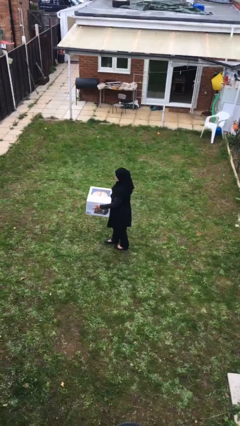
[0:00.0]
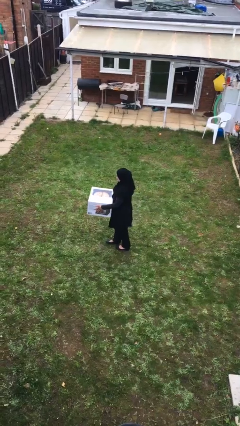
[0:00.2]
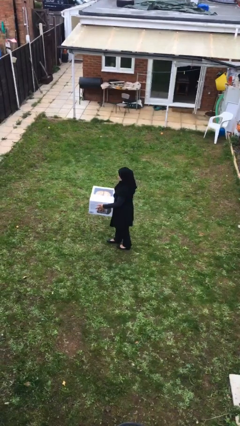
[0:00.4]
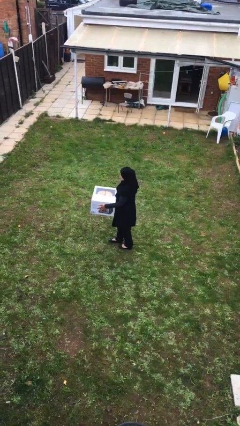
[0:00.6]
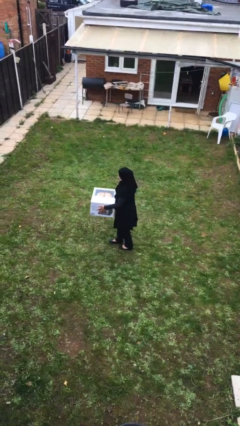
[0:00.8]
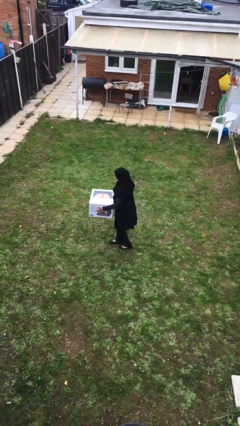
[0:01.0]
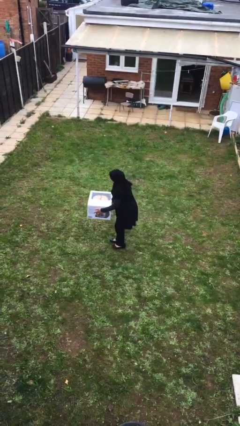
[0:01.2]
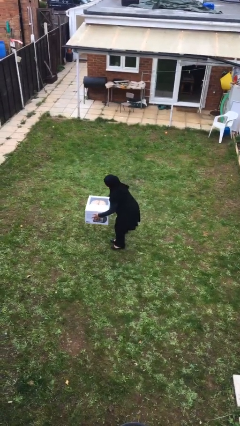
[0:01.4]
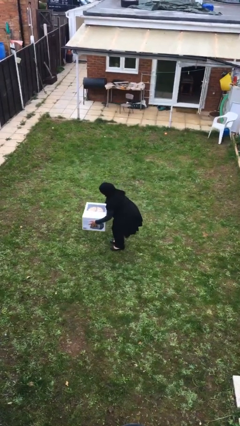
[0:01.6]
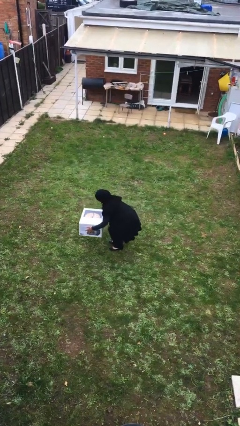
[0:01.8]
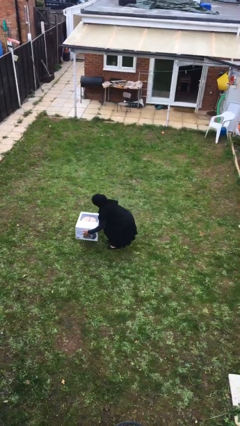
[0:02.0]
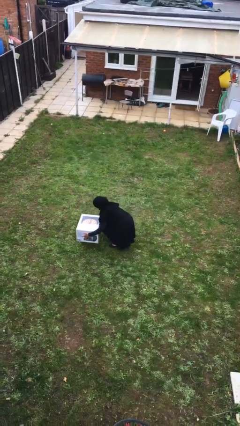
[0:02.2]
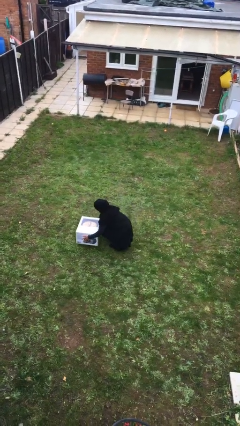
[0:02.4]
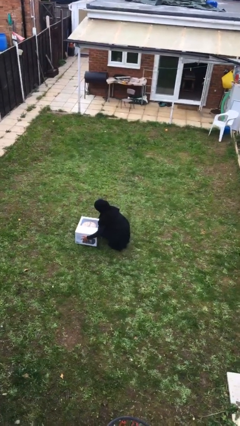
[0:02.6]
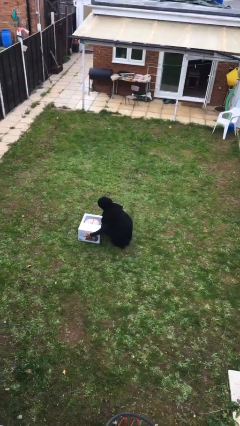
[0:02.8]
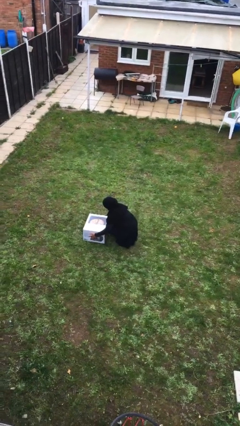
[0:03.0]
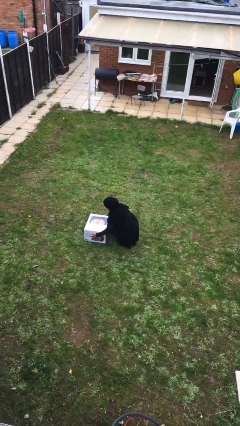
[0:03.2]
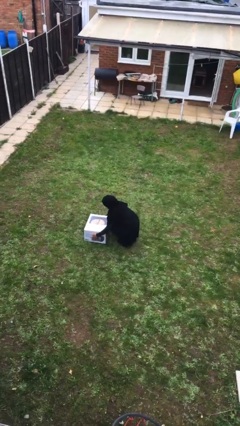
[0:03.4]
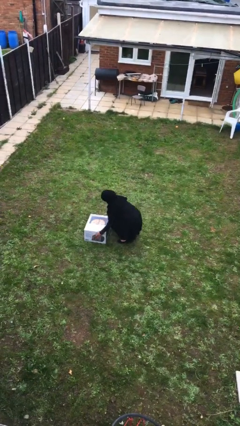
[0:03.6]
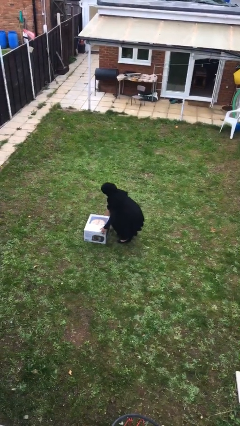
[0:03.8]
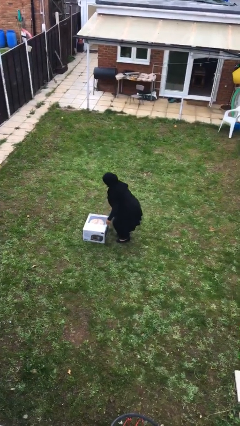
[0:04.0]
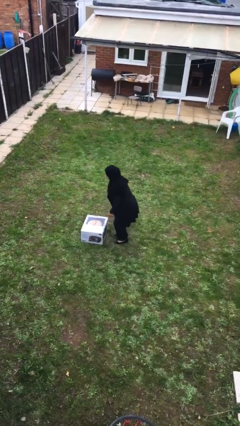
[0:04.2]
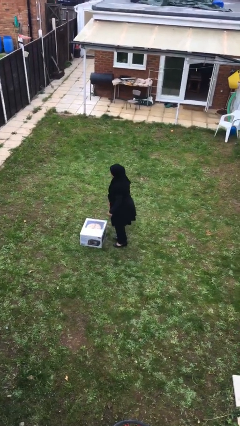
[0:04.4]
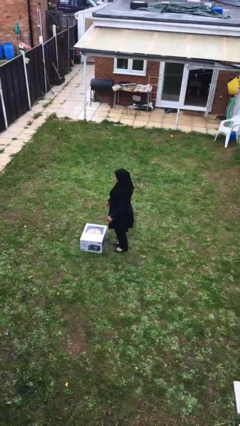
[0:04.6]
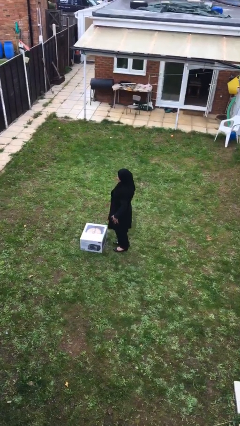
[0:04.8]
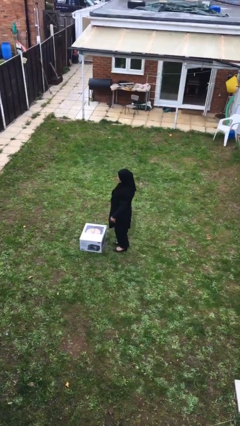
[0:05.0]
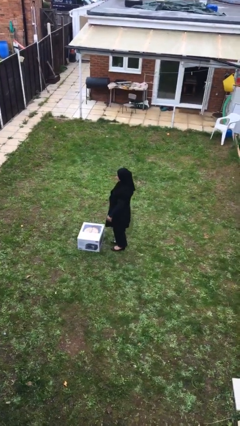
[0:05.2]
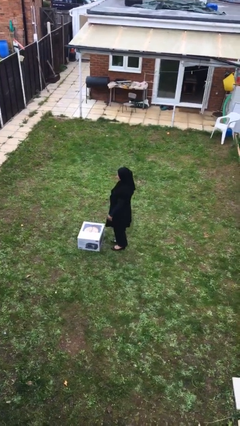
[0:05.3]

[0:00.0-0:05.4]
person puts down object on floor

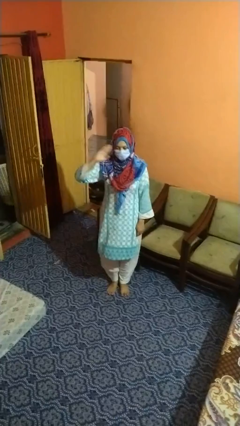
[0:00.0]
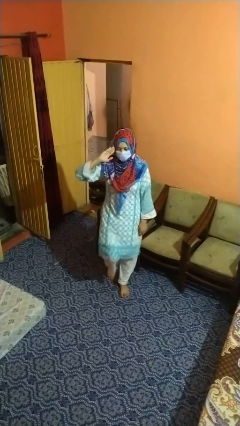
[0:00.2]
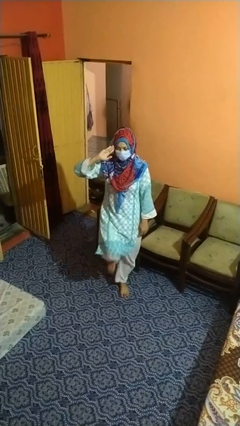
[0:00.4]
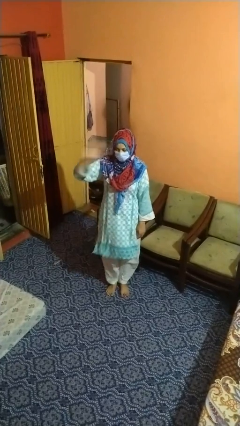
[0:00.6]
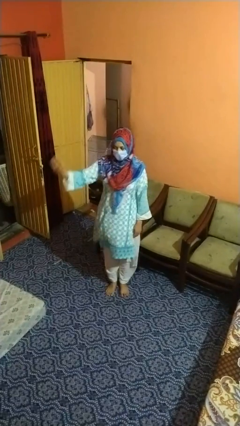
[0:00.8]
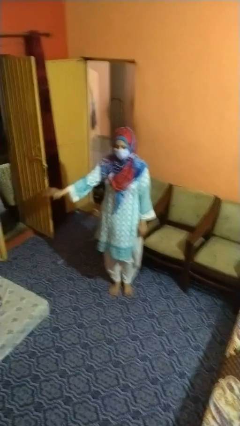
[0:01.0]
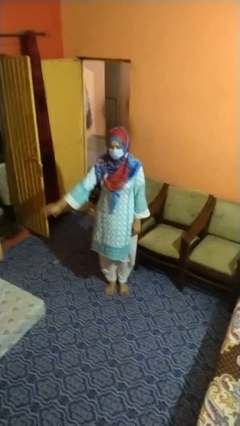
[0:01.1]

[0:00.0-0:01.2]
person salutes

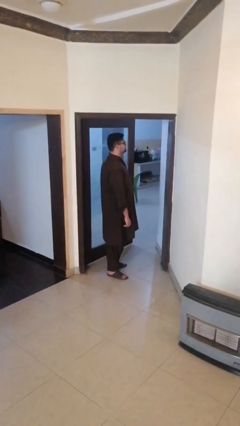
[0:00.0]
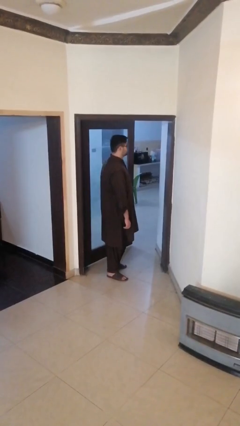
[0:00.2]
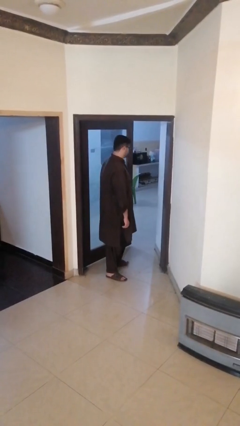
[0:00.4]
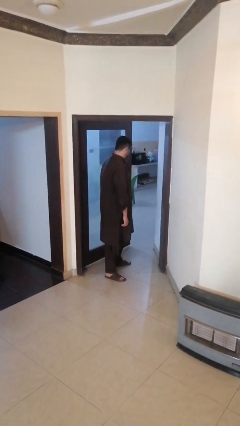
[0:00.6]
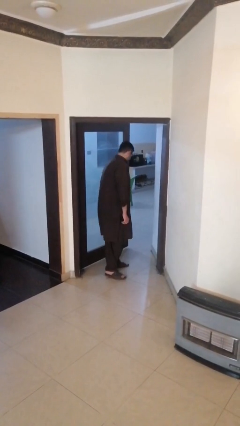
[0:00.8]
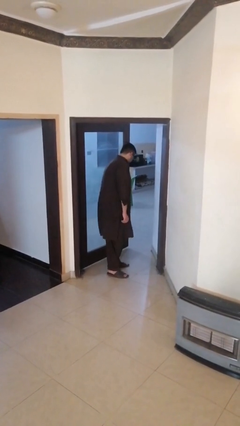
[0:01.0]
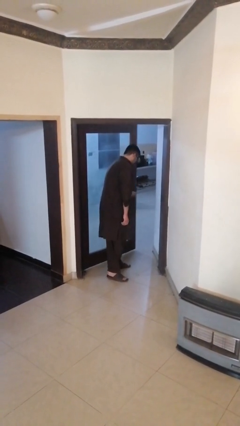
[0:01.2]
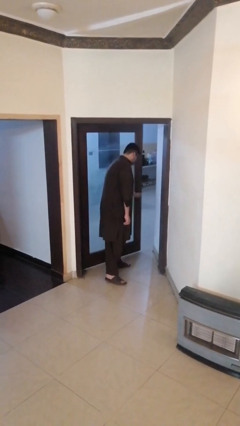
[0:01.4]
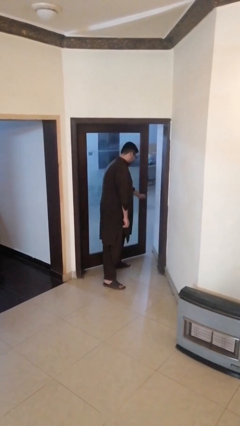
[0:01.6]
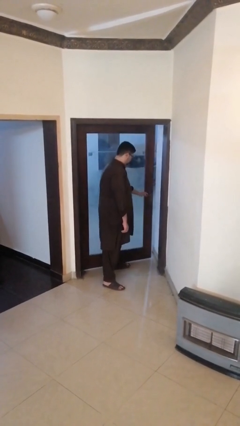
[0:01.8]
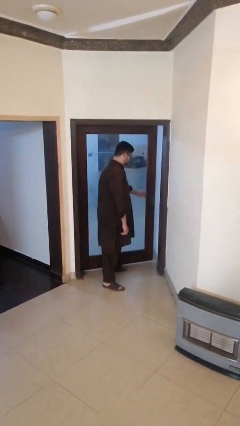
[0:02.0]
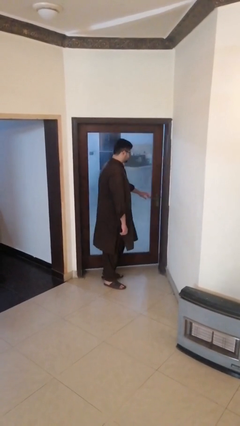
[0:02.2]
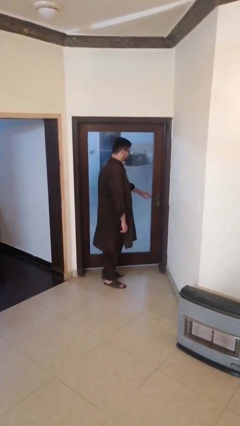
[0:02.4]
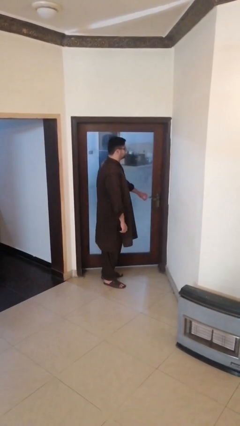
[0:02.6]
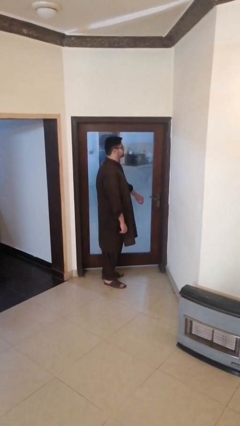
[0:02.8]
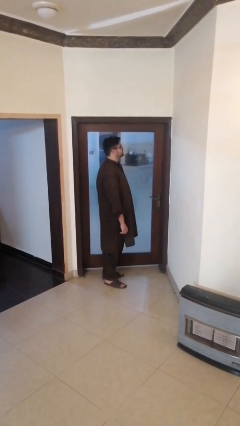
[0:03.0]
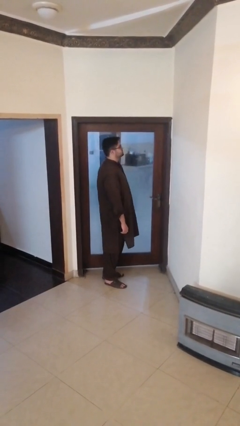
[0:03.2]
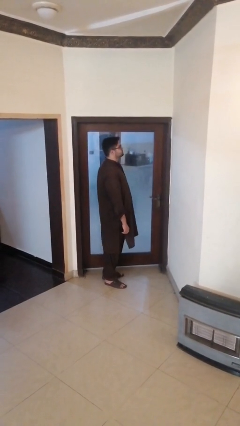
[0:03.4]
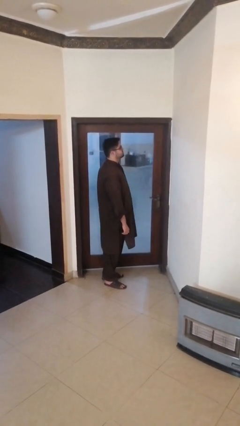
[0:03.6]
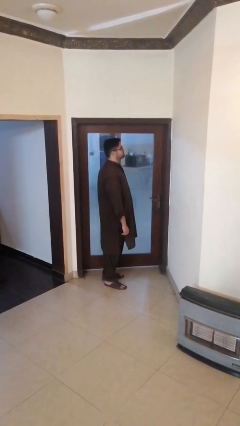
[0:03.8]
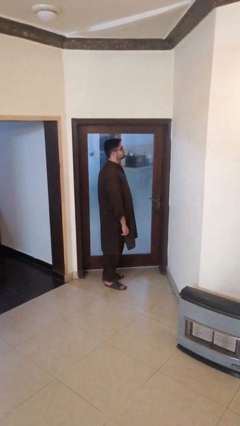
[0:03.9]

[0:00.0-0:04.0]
person closes facility door

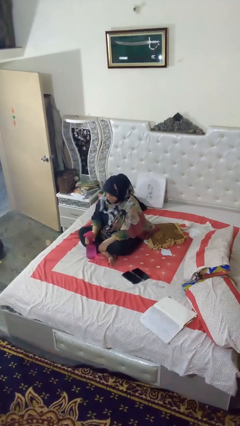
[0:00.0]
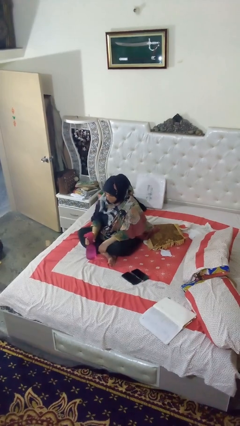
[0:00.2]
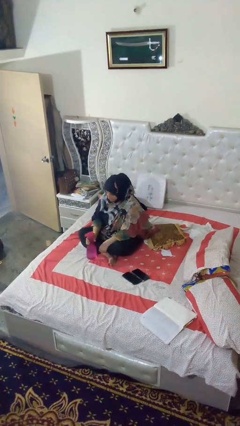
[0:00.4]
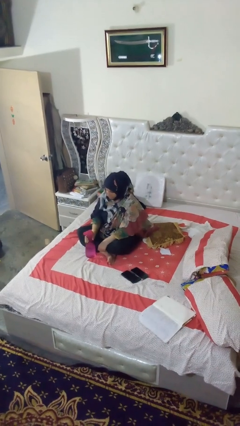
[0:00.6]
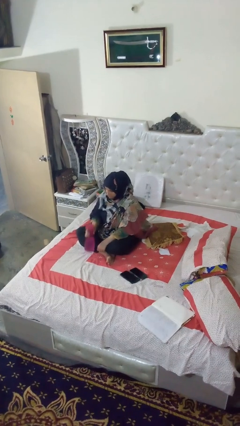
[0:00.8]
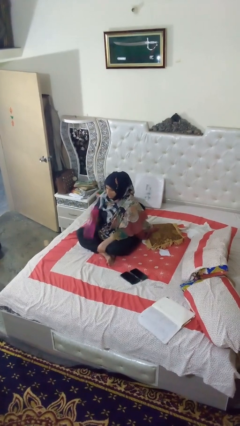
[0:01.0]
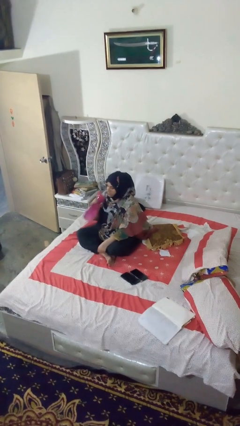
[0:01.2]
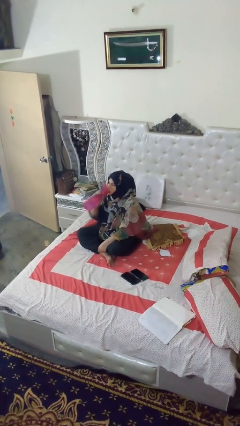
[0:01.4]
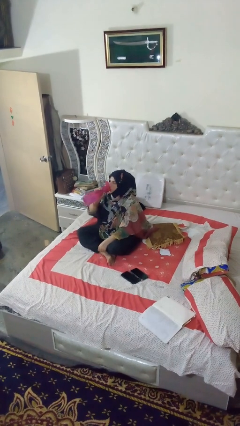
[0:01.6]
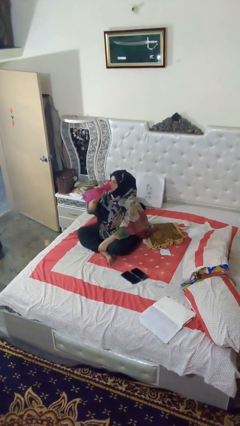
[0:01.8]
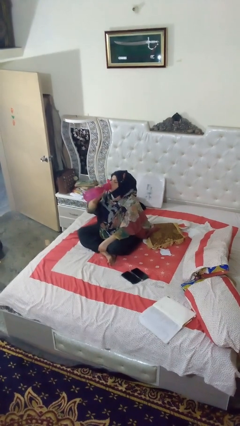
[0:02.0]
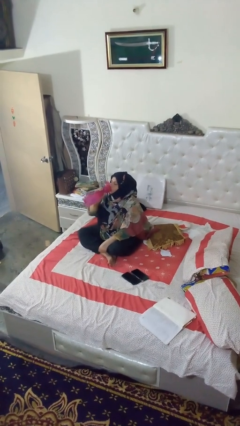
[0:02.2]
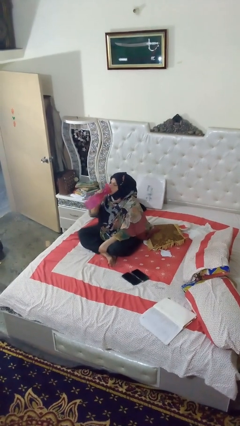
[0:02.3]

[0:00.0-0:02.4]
person drinks from bottle

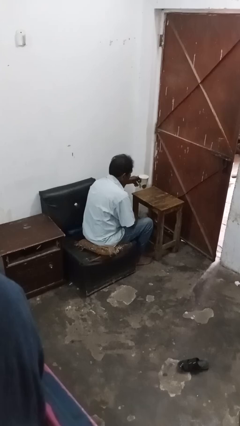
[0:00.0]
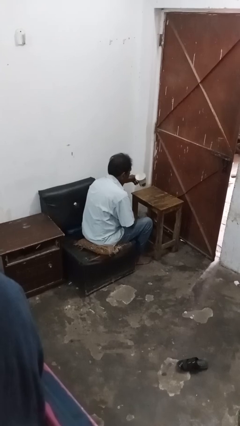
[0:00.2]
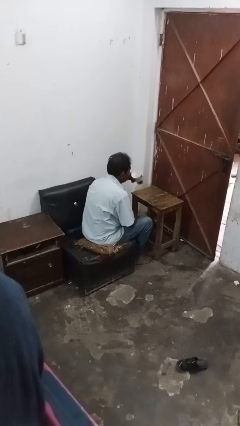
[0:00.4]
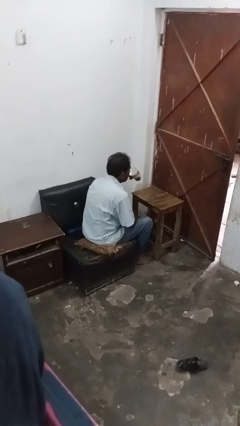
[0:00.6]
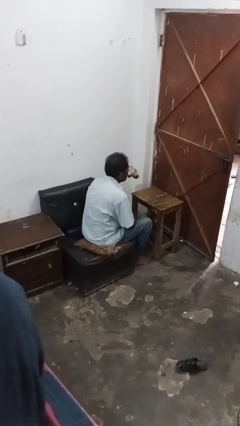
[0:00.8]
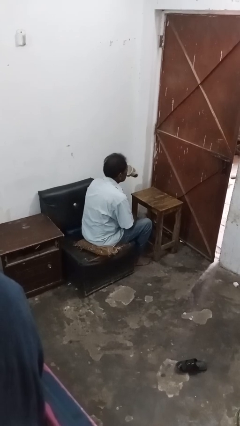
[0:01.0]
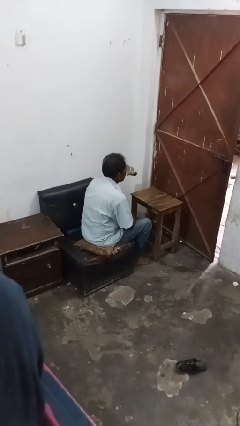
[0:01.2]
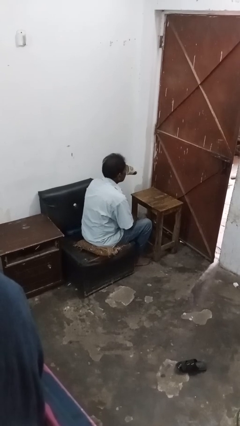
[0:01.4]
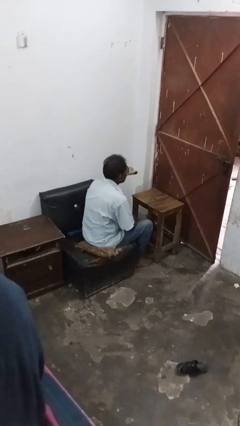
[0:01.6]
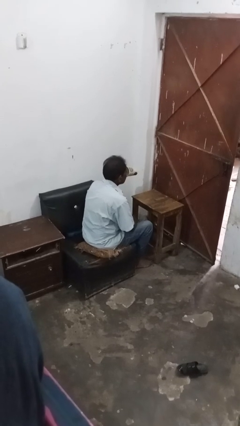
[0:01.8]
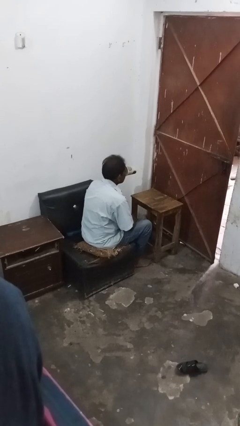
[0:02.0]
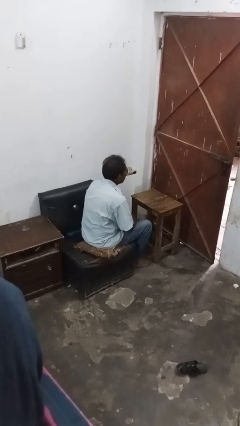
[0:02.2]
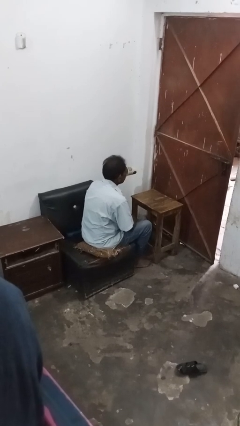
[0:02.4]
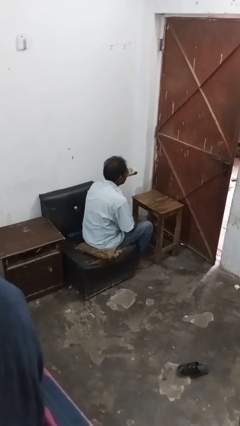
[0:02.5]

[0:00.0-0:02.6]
person drinks from mug

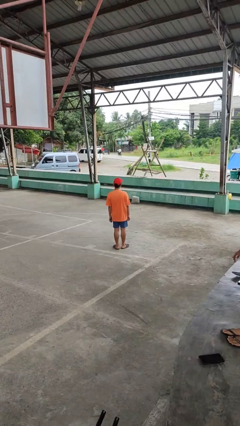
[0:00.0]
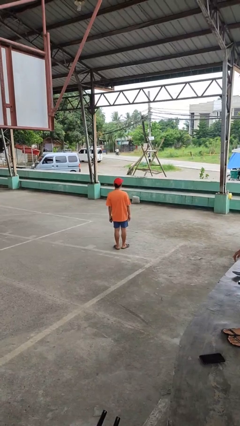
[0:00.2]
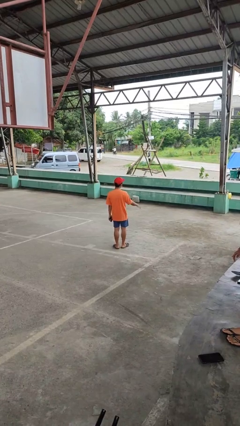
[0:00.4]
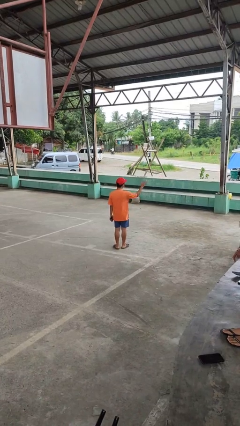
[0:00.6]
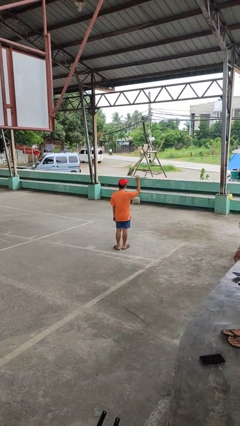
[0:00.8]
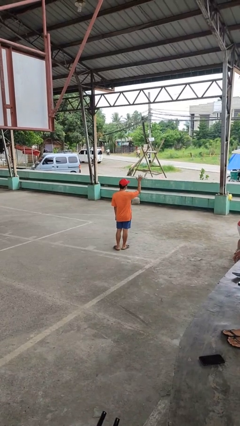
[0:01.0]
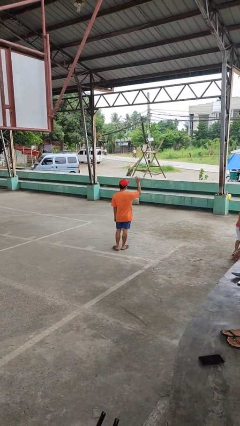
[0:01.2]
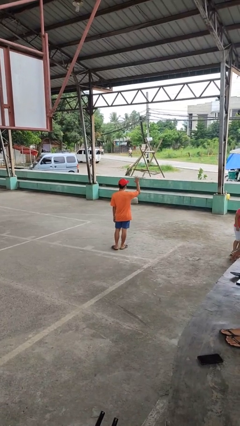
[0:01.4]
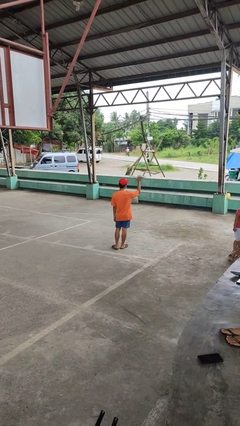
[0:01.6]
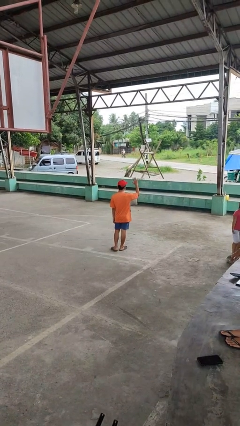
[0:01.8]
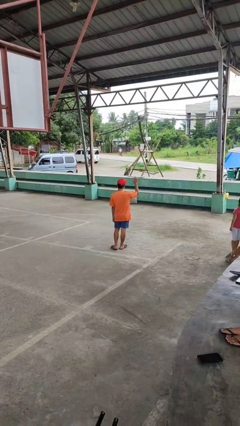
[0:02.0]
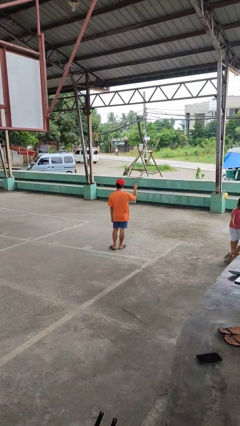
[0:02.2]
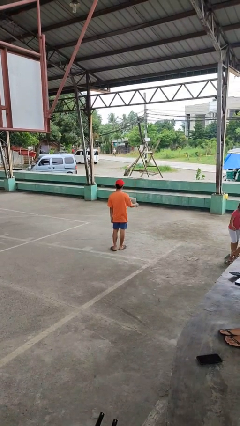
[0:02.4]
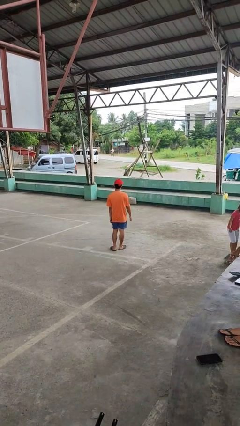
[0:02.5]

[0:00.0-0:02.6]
person waves at person
